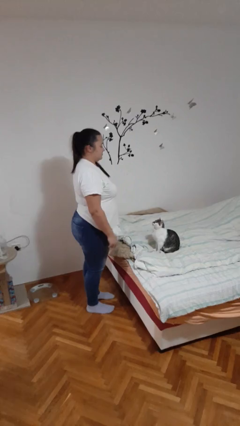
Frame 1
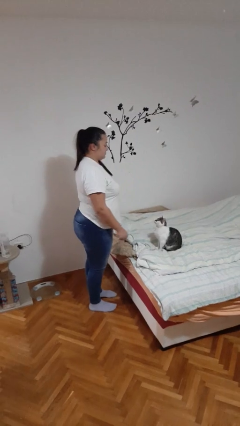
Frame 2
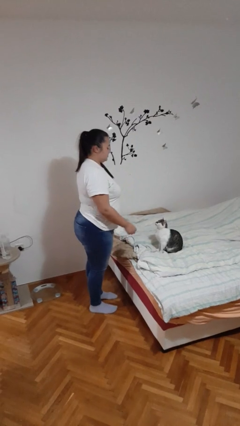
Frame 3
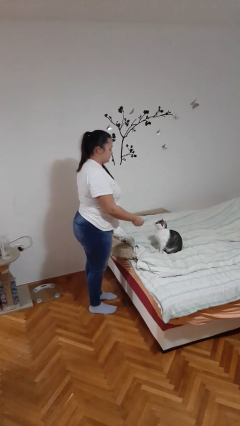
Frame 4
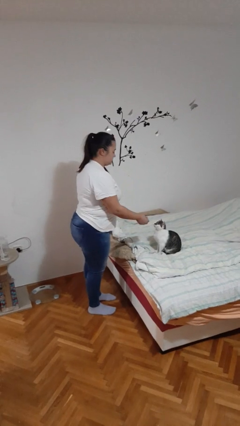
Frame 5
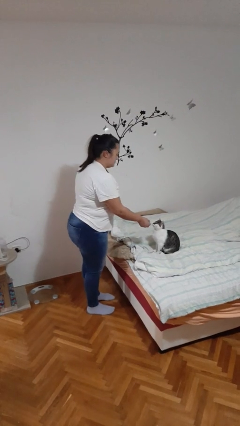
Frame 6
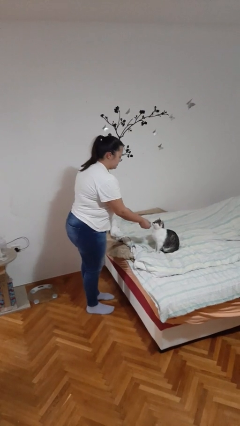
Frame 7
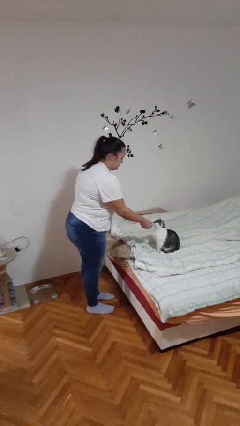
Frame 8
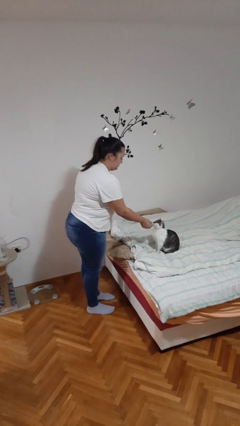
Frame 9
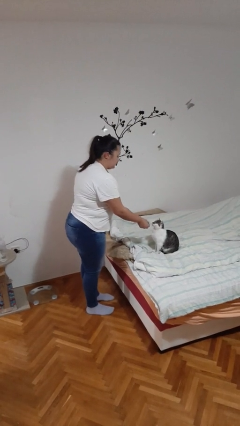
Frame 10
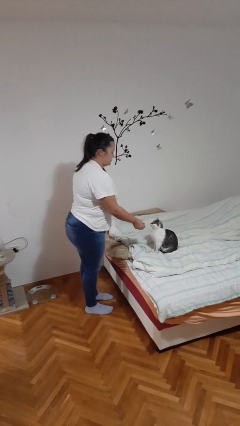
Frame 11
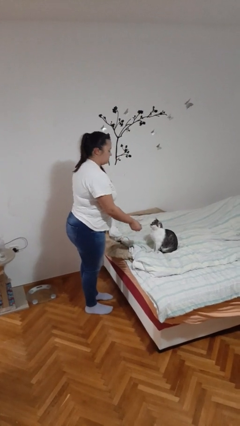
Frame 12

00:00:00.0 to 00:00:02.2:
person feeds cat

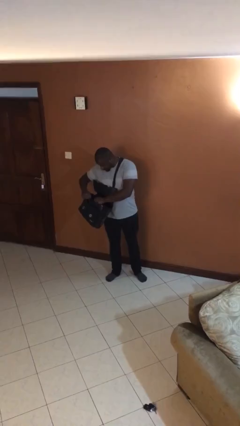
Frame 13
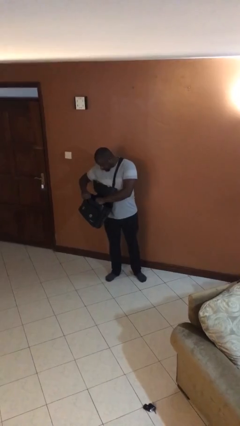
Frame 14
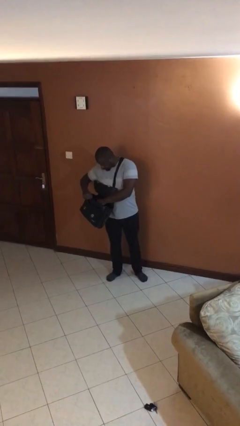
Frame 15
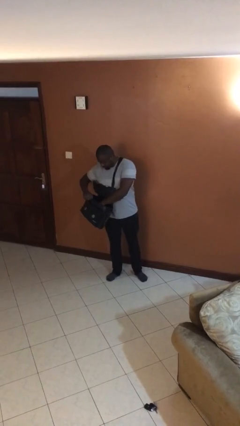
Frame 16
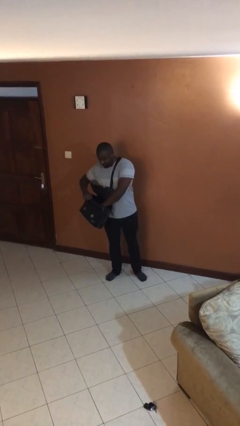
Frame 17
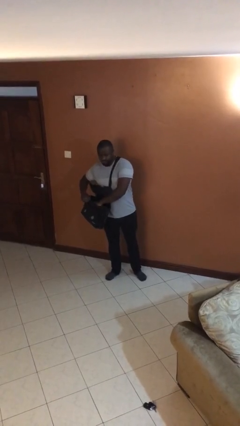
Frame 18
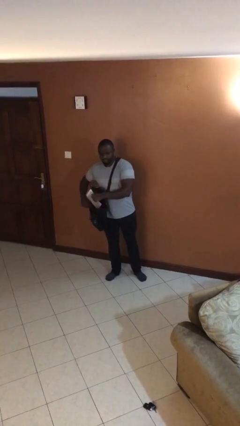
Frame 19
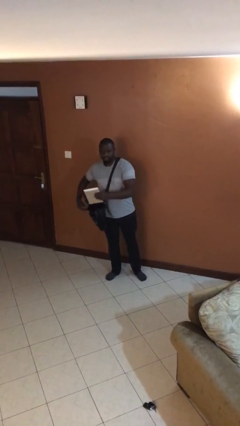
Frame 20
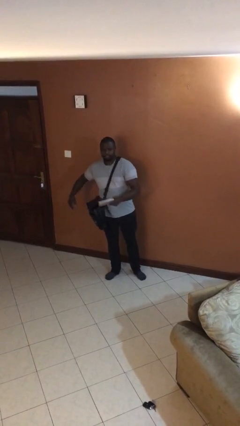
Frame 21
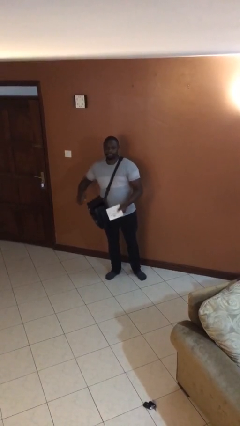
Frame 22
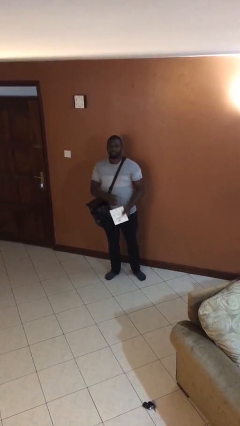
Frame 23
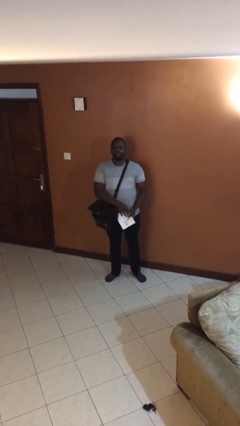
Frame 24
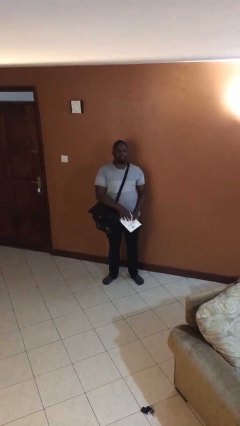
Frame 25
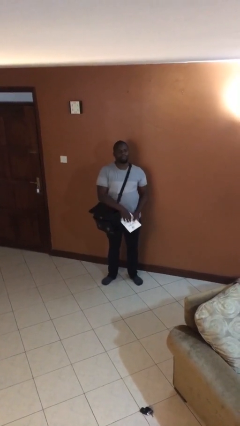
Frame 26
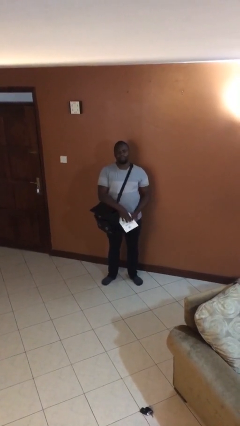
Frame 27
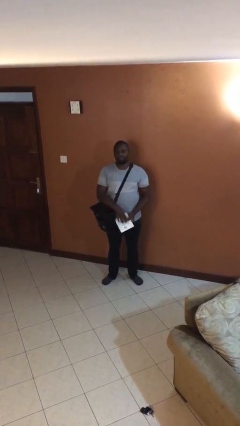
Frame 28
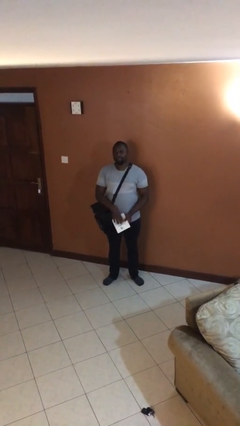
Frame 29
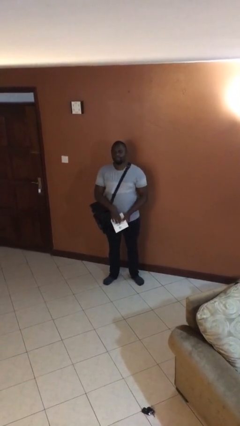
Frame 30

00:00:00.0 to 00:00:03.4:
person takes object from purse

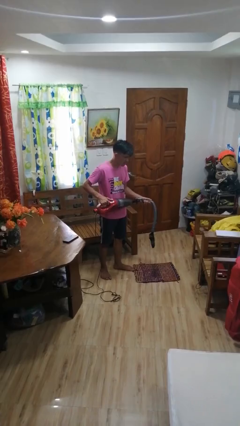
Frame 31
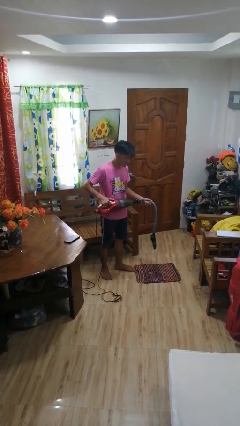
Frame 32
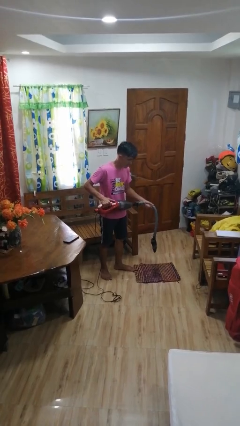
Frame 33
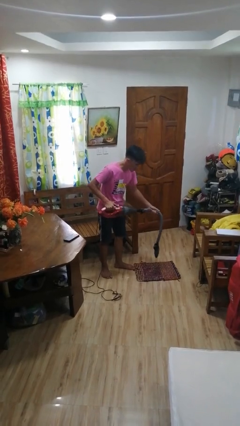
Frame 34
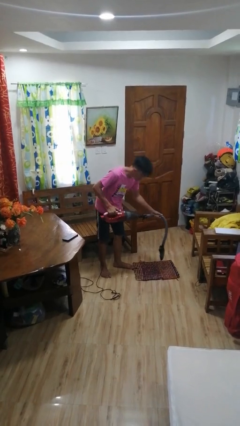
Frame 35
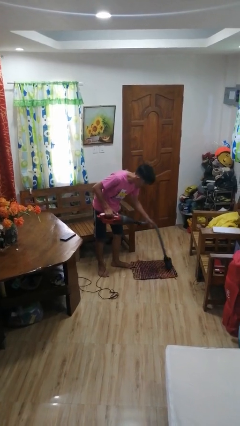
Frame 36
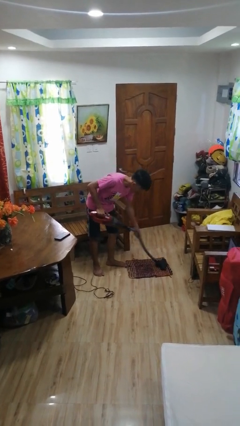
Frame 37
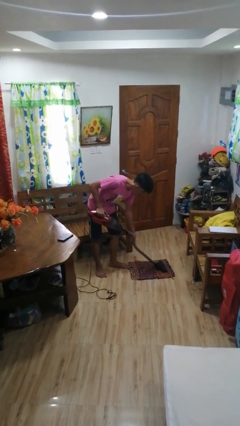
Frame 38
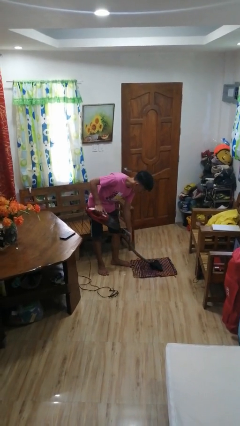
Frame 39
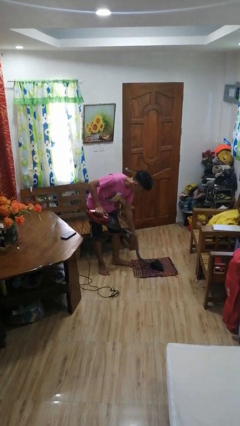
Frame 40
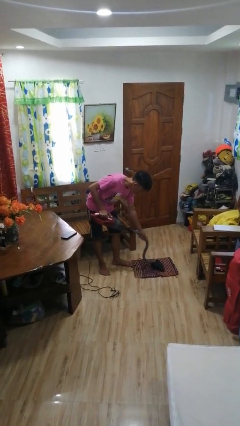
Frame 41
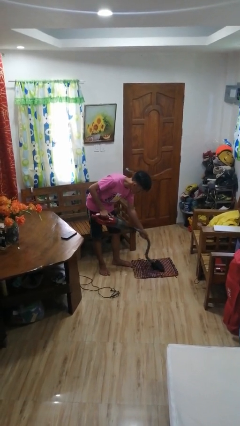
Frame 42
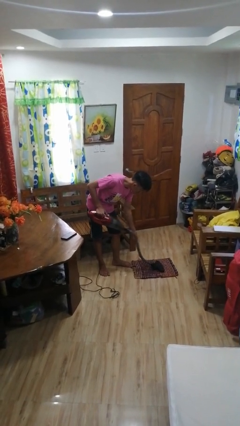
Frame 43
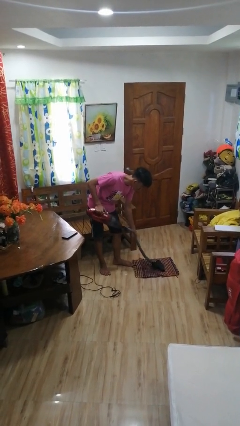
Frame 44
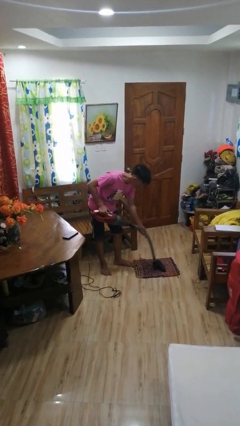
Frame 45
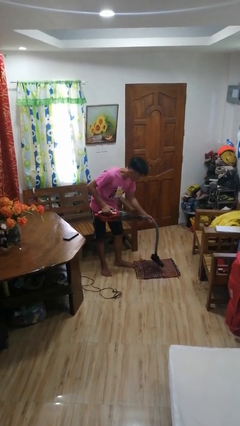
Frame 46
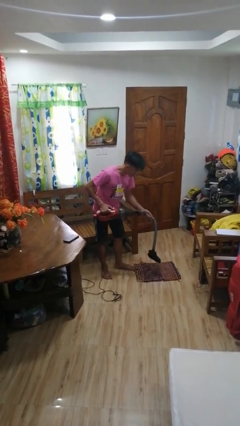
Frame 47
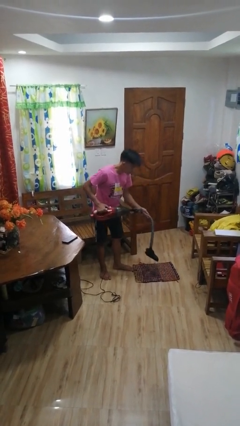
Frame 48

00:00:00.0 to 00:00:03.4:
person vacuums carpet

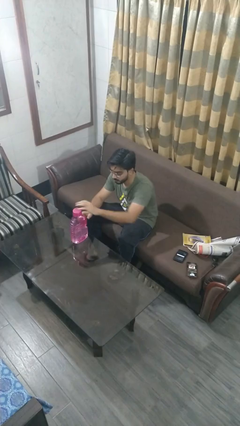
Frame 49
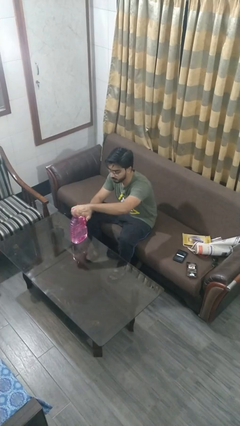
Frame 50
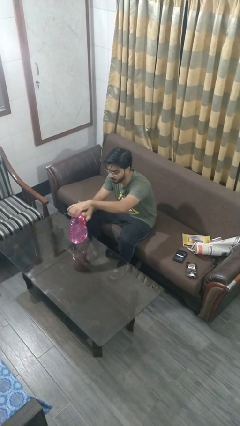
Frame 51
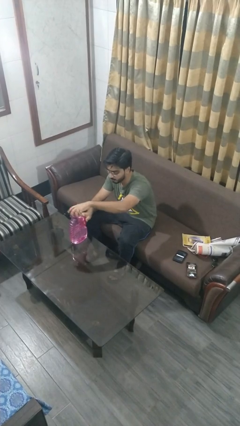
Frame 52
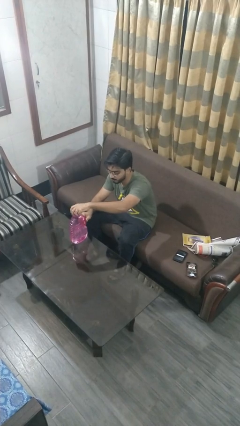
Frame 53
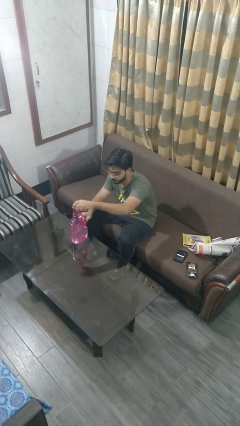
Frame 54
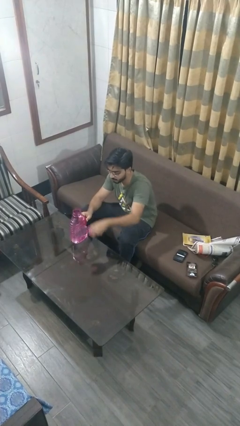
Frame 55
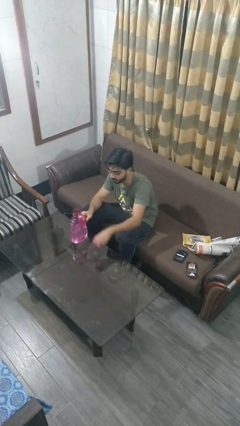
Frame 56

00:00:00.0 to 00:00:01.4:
person unscrews lid from bottle

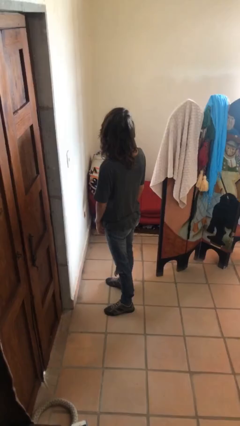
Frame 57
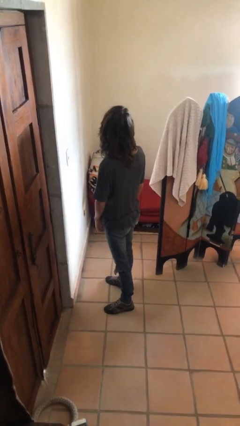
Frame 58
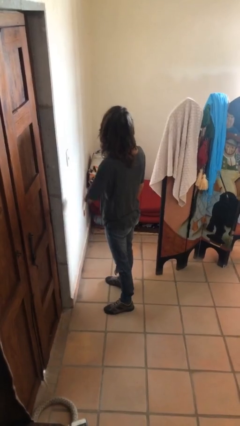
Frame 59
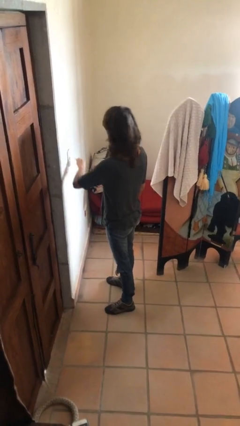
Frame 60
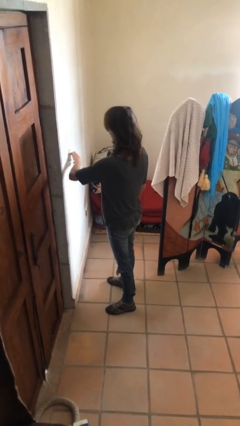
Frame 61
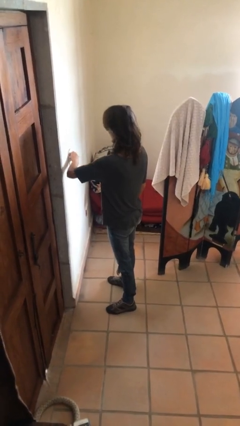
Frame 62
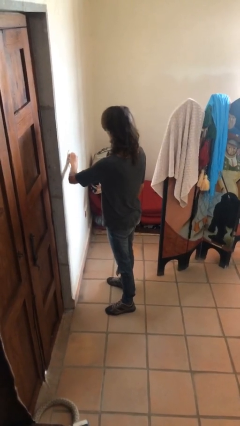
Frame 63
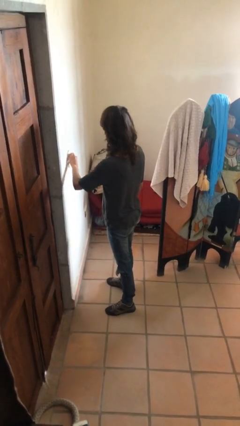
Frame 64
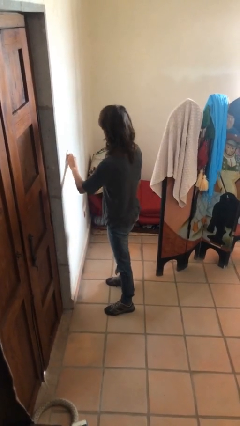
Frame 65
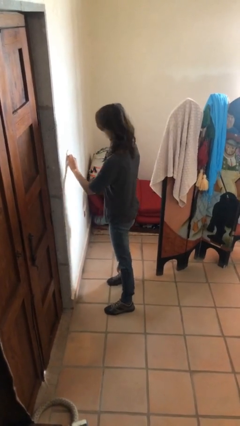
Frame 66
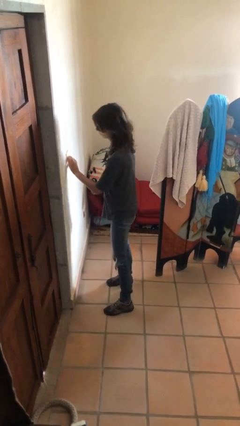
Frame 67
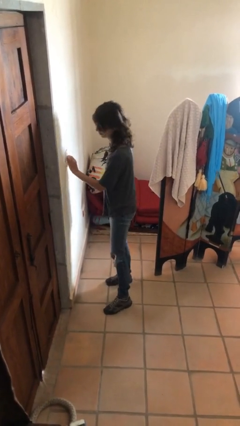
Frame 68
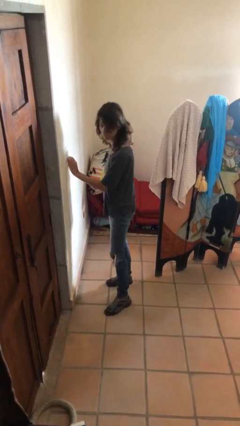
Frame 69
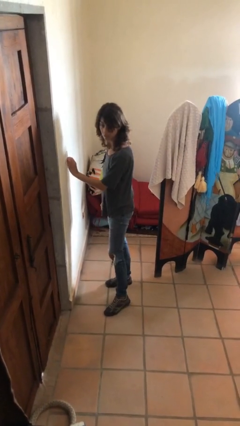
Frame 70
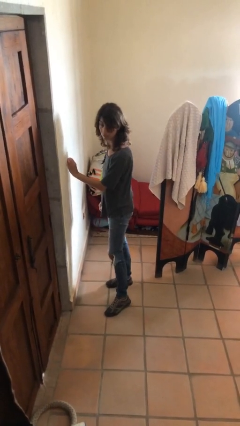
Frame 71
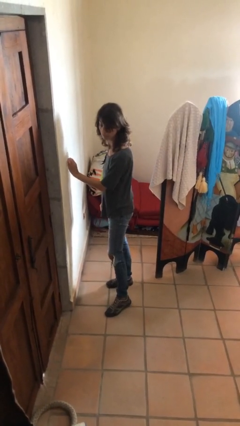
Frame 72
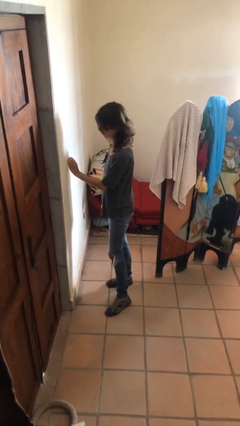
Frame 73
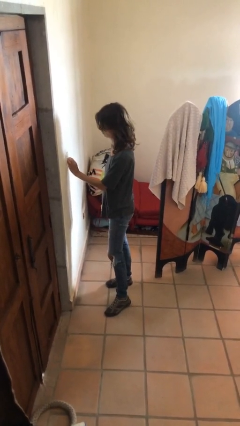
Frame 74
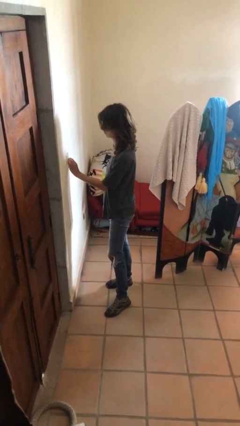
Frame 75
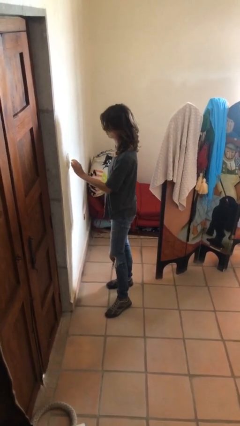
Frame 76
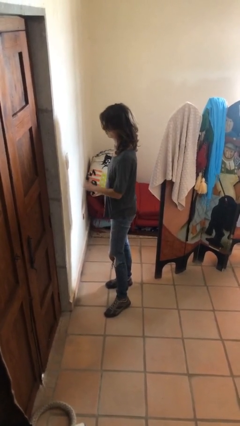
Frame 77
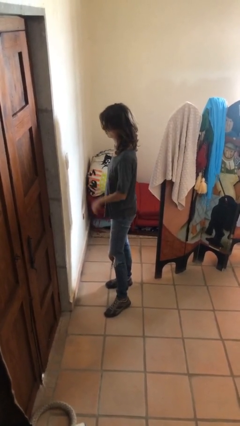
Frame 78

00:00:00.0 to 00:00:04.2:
person adjusts thermostat

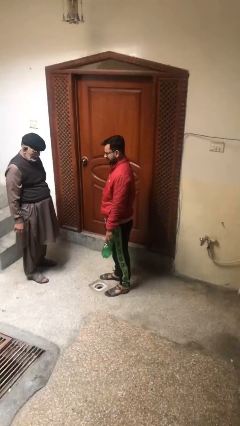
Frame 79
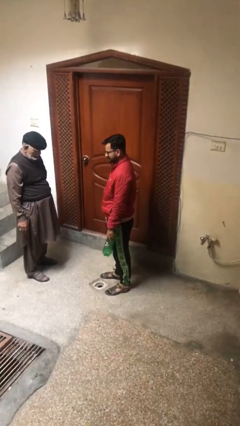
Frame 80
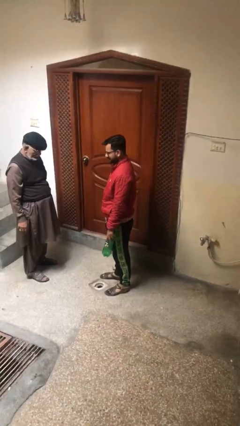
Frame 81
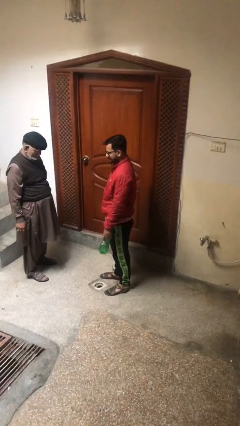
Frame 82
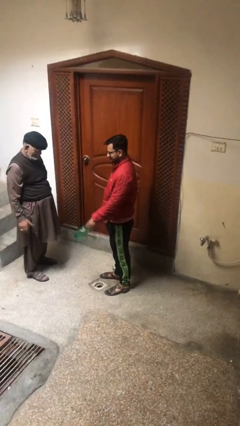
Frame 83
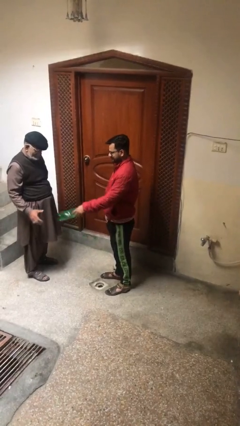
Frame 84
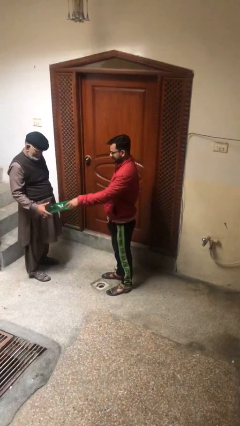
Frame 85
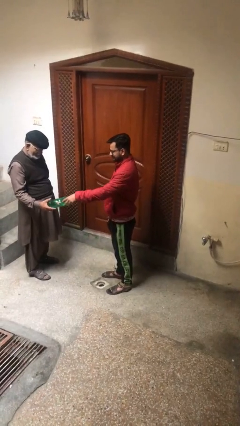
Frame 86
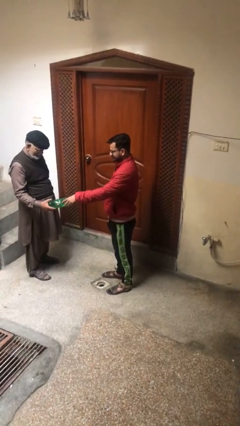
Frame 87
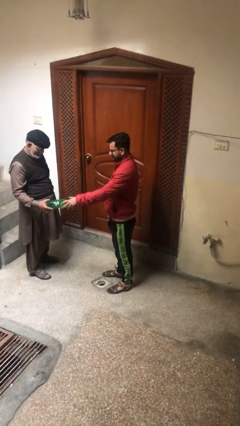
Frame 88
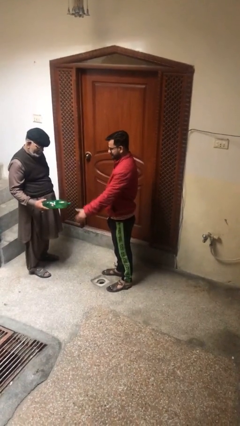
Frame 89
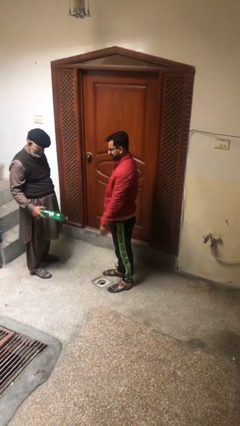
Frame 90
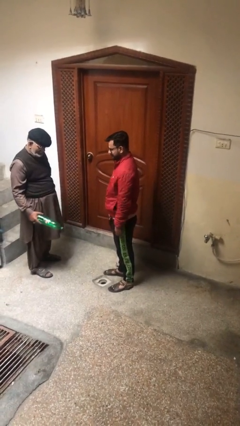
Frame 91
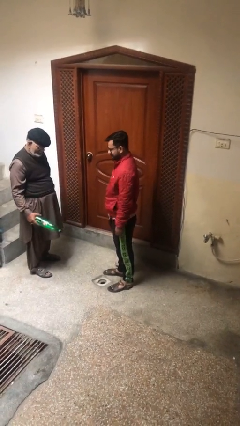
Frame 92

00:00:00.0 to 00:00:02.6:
person transfers object to person
